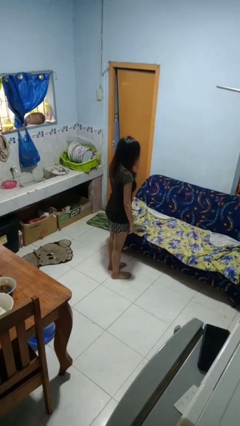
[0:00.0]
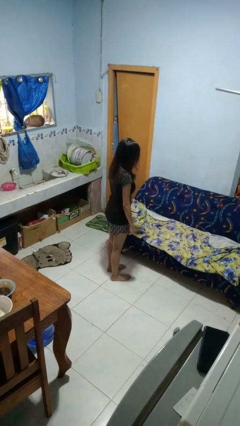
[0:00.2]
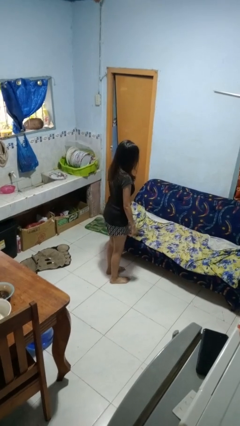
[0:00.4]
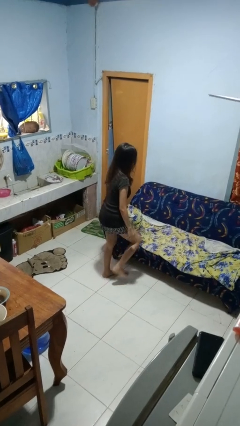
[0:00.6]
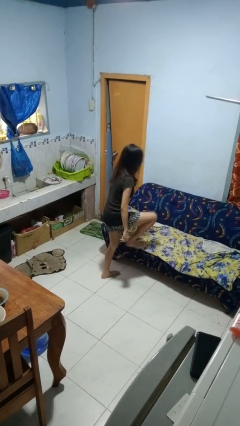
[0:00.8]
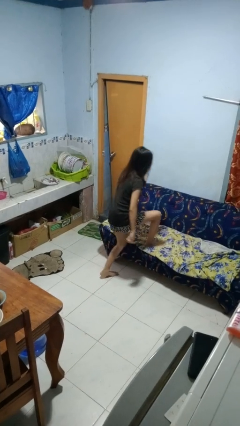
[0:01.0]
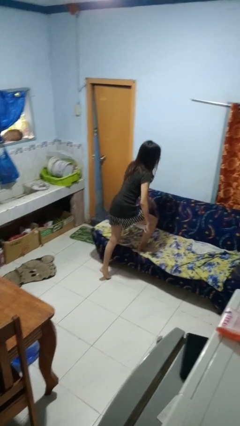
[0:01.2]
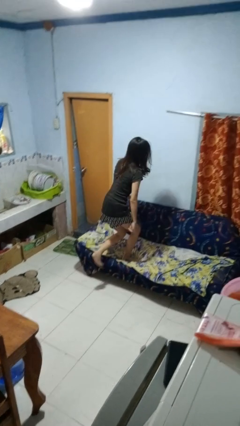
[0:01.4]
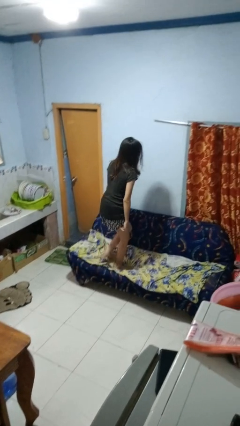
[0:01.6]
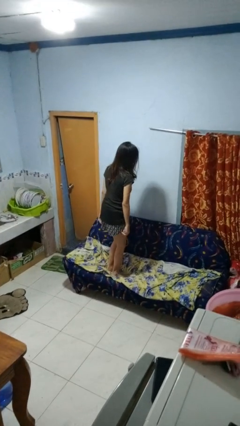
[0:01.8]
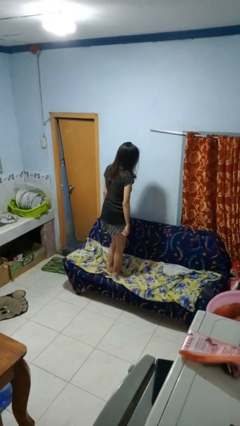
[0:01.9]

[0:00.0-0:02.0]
person climbs on couch

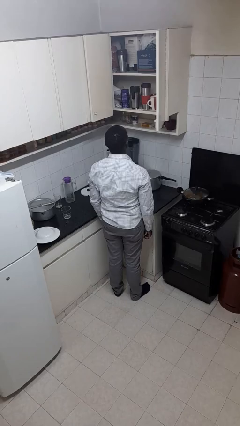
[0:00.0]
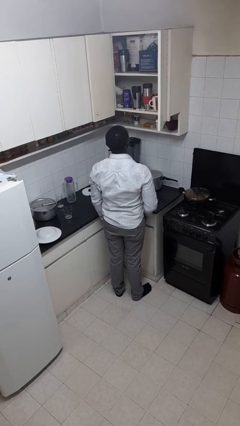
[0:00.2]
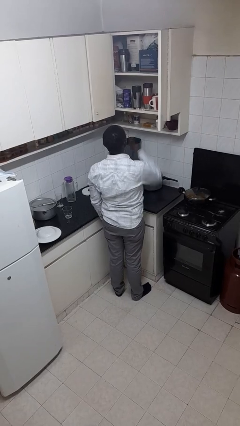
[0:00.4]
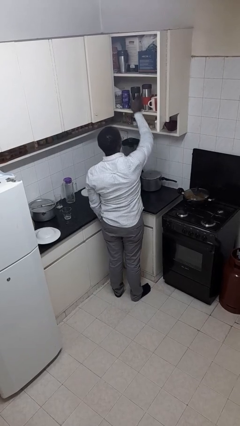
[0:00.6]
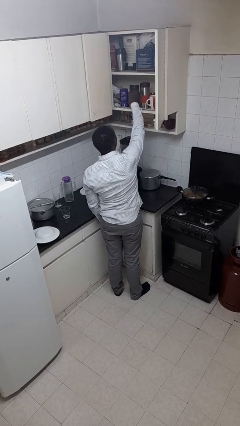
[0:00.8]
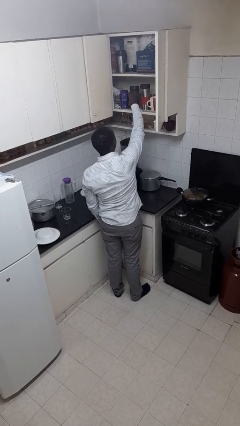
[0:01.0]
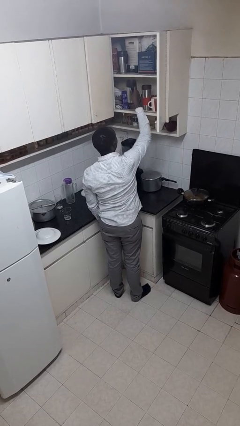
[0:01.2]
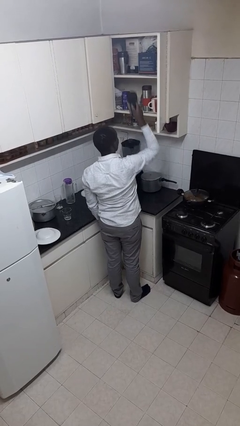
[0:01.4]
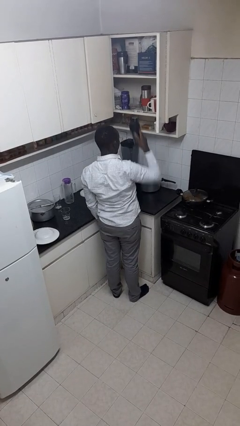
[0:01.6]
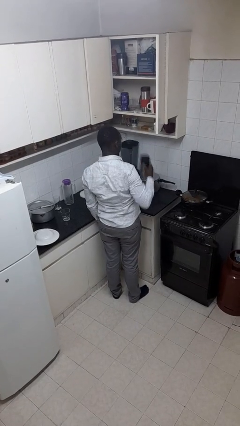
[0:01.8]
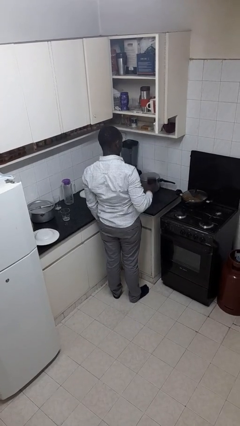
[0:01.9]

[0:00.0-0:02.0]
person takes object from cabinet

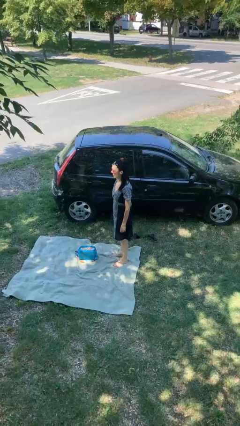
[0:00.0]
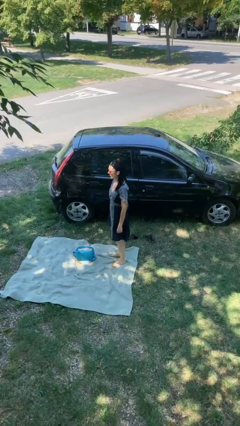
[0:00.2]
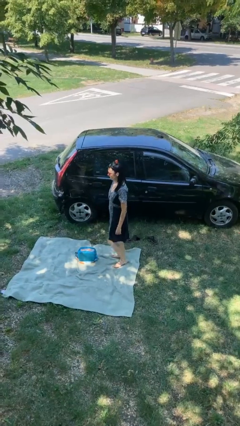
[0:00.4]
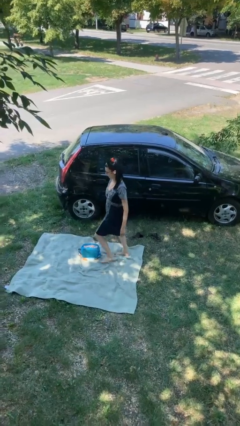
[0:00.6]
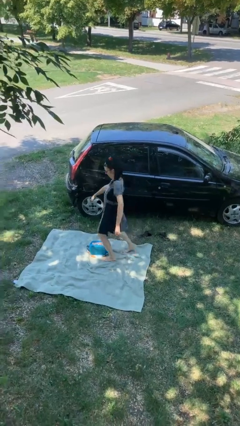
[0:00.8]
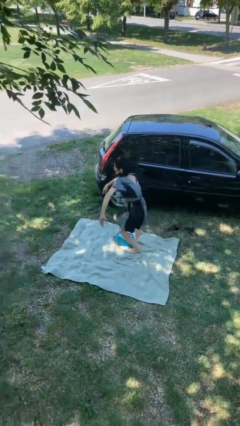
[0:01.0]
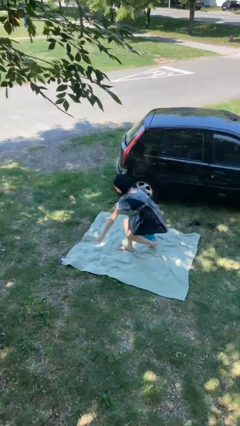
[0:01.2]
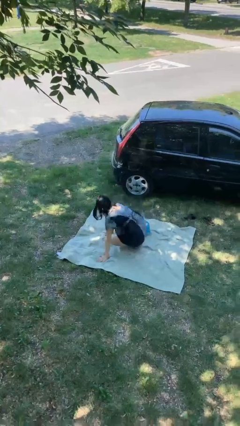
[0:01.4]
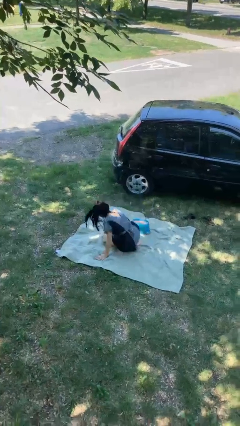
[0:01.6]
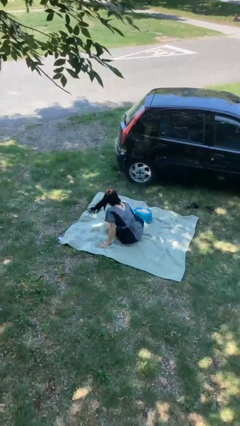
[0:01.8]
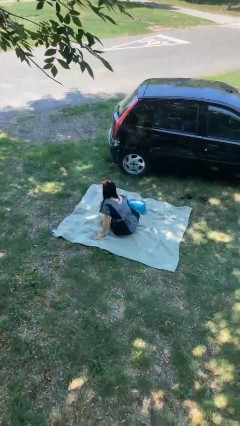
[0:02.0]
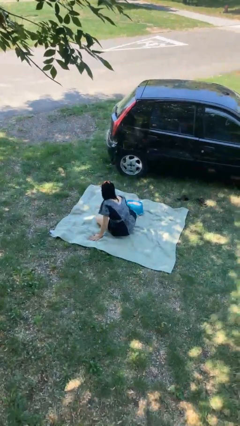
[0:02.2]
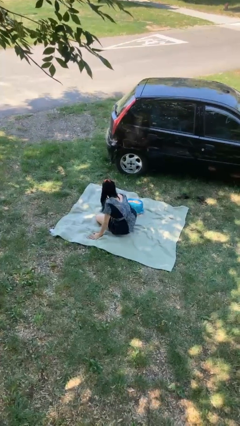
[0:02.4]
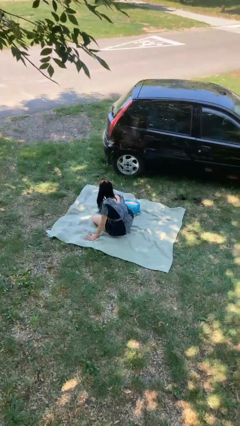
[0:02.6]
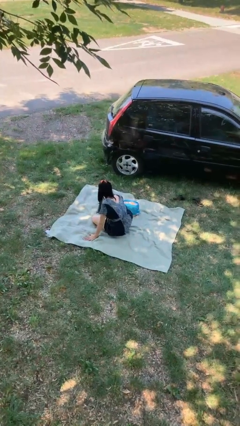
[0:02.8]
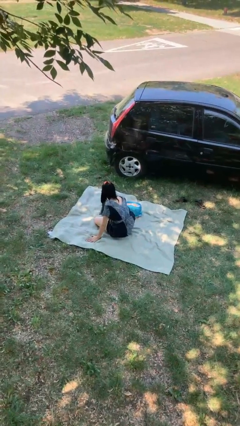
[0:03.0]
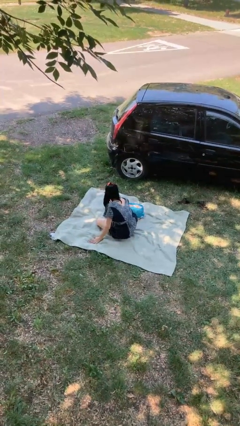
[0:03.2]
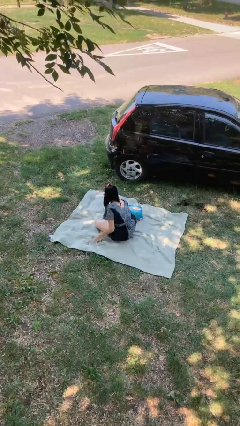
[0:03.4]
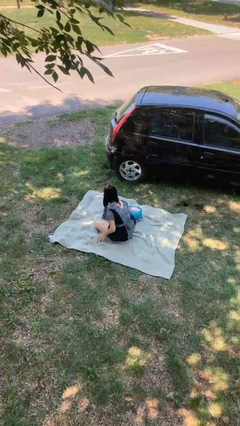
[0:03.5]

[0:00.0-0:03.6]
person trips on object on floor

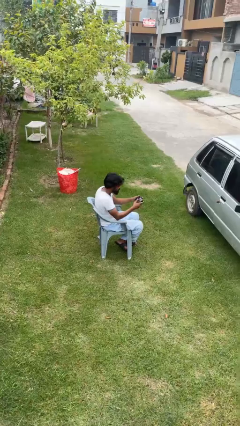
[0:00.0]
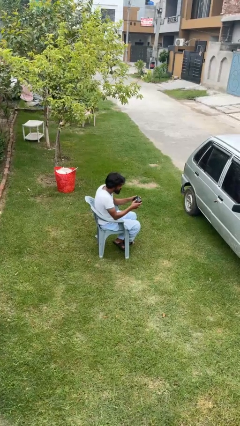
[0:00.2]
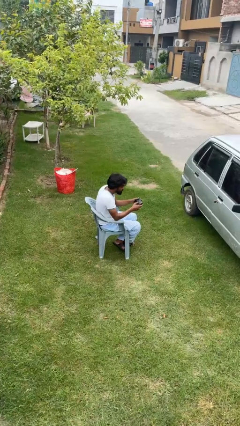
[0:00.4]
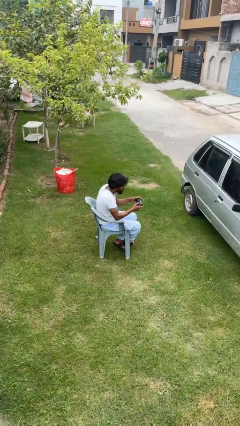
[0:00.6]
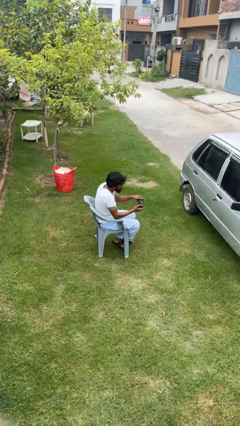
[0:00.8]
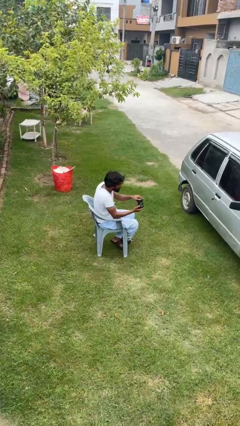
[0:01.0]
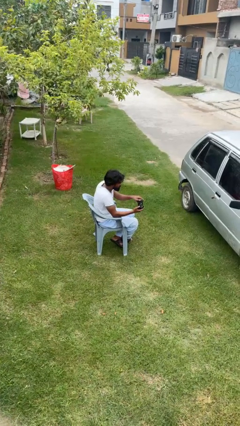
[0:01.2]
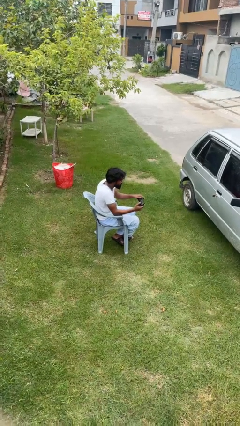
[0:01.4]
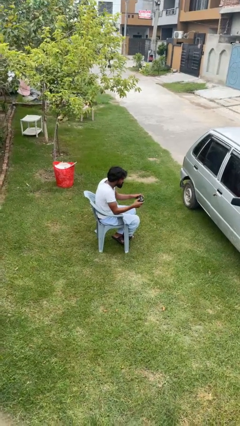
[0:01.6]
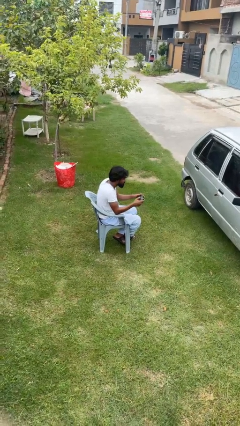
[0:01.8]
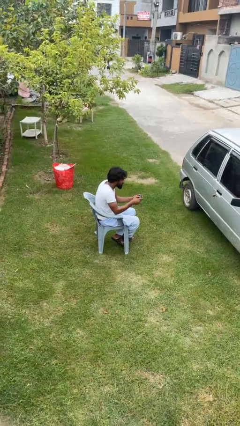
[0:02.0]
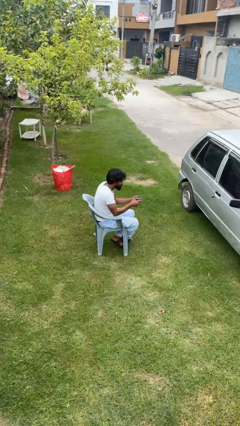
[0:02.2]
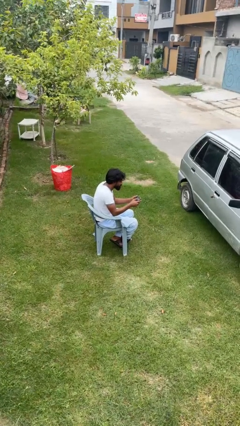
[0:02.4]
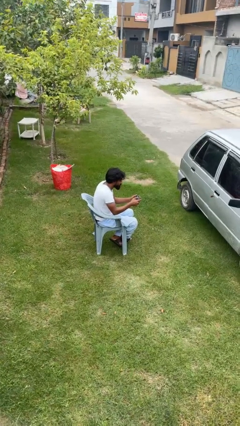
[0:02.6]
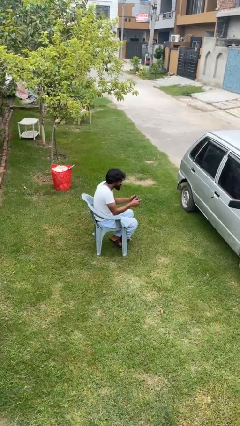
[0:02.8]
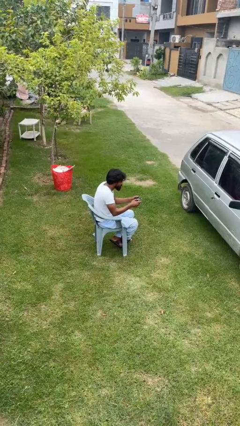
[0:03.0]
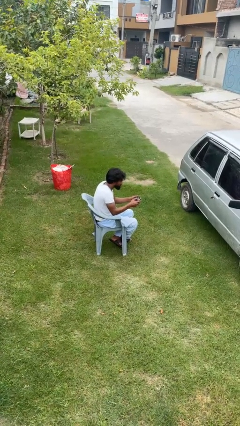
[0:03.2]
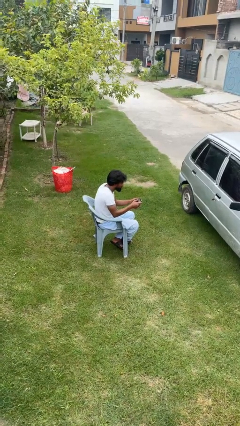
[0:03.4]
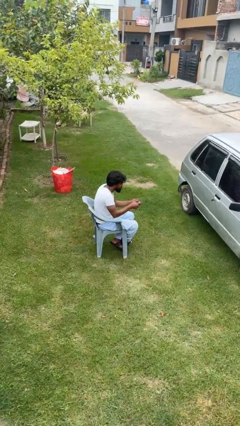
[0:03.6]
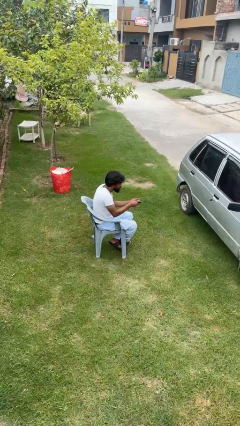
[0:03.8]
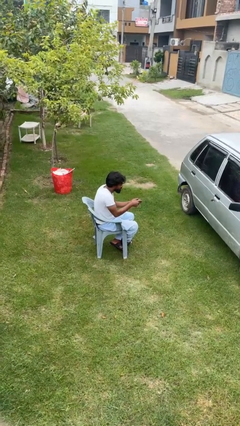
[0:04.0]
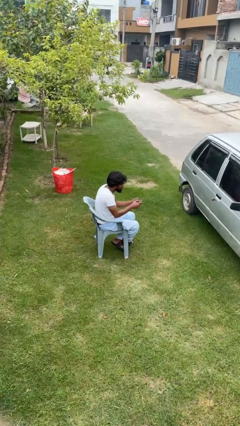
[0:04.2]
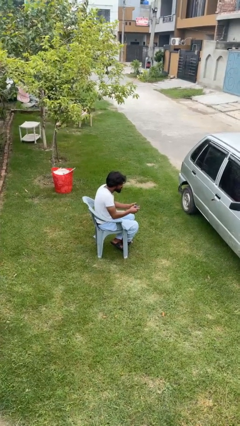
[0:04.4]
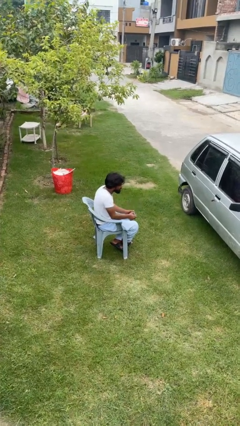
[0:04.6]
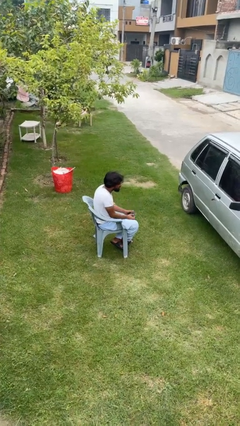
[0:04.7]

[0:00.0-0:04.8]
person interacts with handheld game

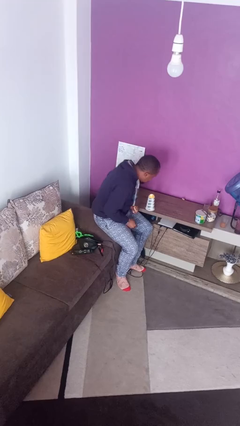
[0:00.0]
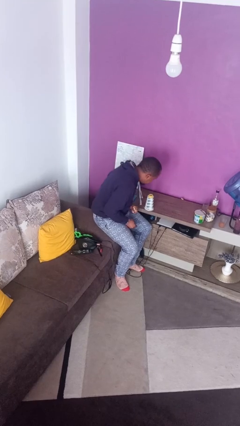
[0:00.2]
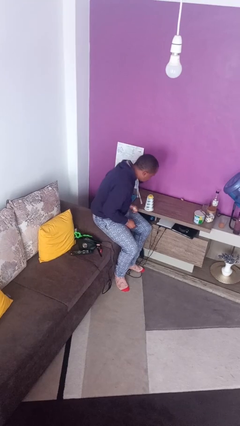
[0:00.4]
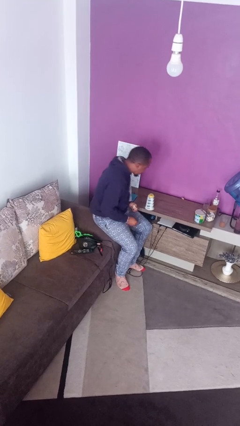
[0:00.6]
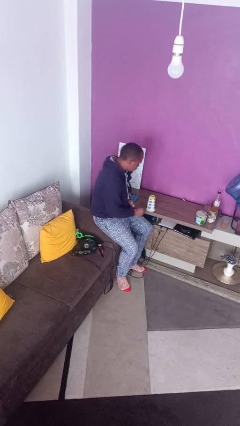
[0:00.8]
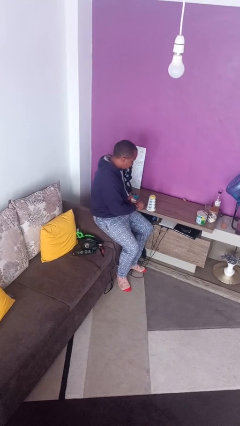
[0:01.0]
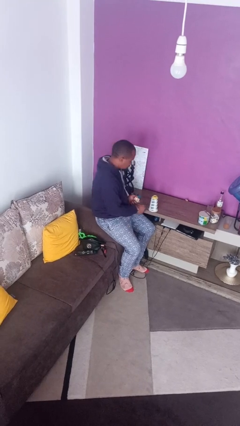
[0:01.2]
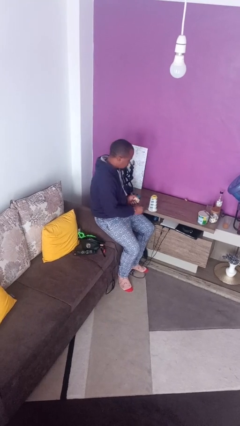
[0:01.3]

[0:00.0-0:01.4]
person extinguishes candle

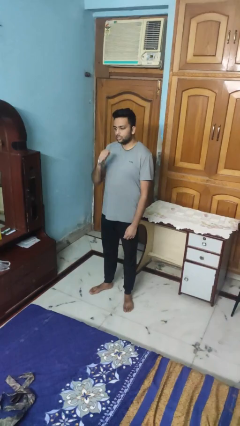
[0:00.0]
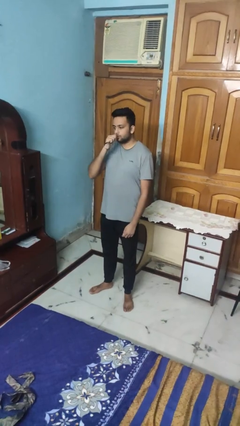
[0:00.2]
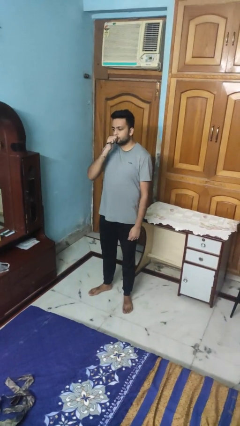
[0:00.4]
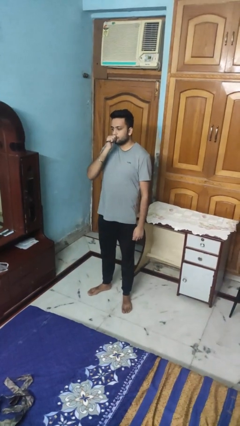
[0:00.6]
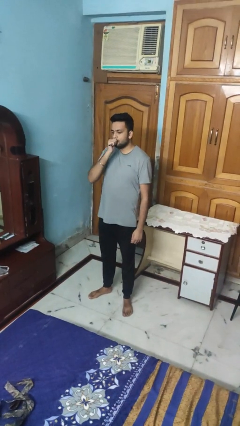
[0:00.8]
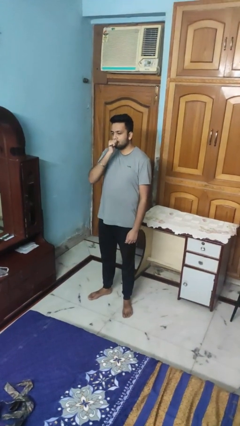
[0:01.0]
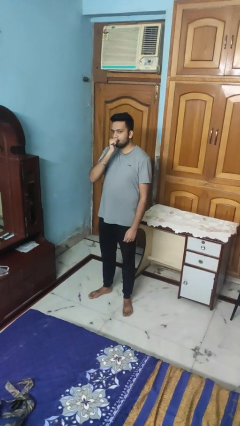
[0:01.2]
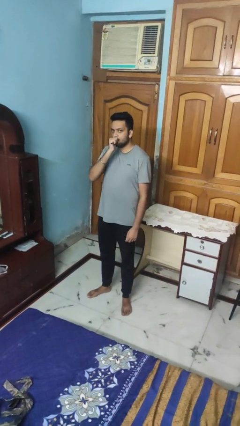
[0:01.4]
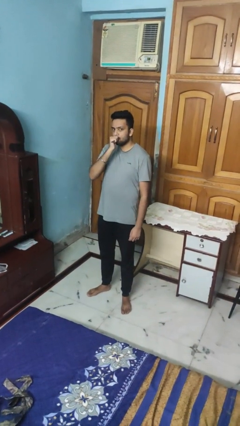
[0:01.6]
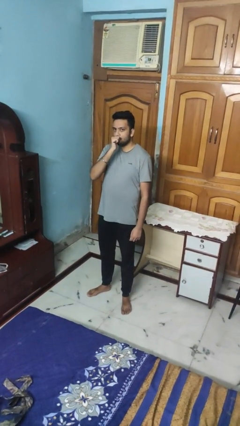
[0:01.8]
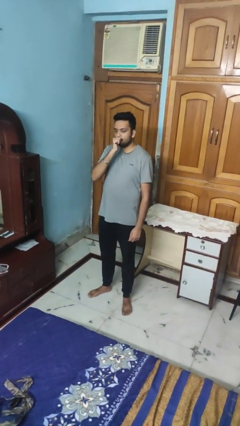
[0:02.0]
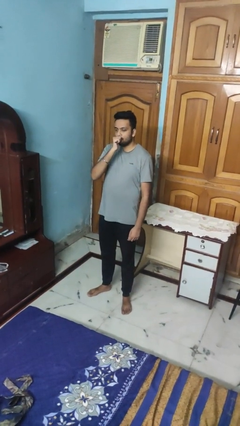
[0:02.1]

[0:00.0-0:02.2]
person vapes

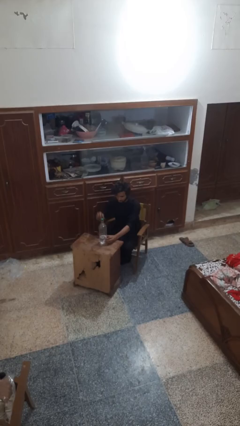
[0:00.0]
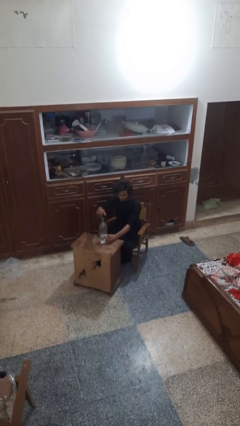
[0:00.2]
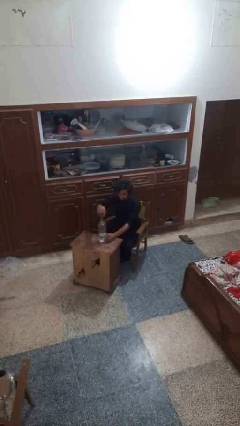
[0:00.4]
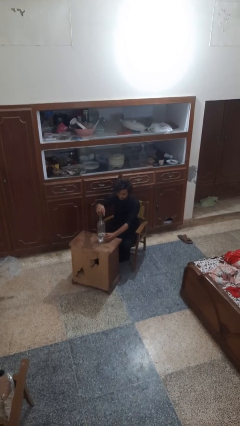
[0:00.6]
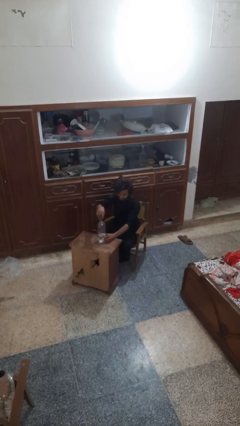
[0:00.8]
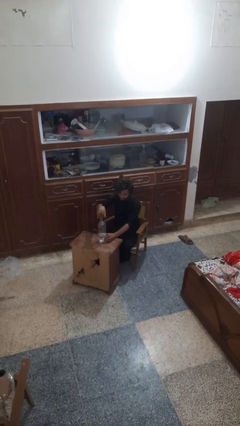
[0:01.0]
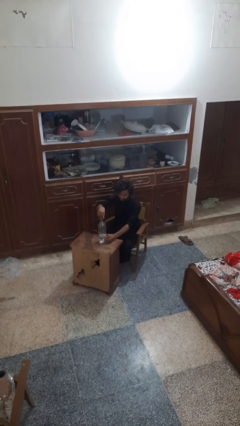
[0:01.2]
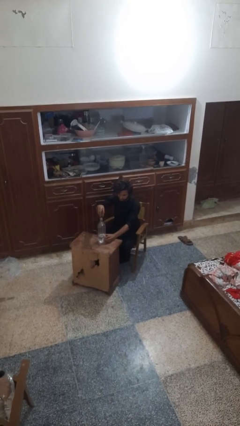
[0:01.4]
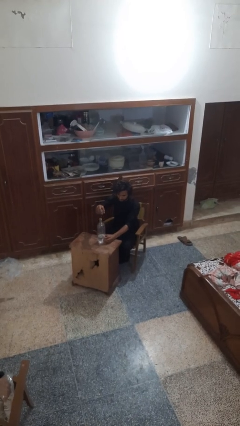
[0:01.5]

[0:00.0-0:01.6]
person unscrews lid from bottle
